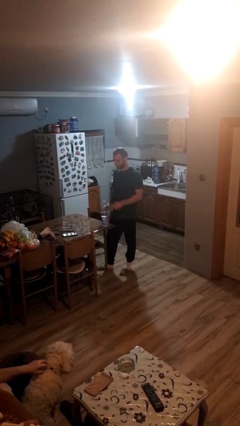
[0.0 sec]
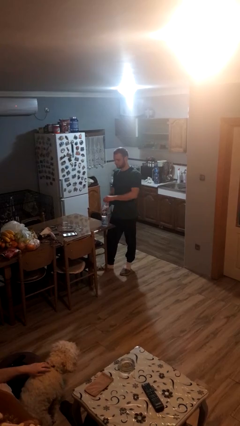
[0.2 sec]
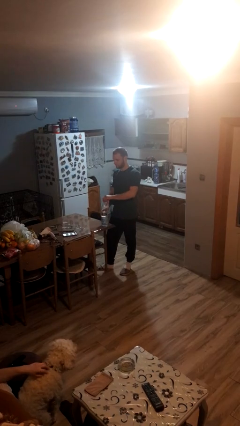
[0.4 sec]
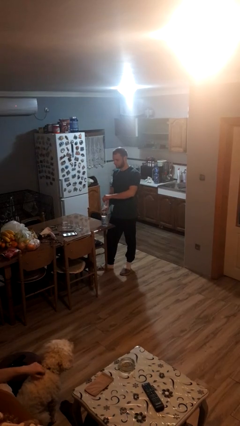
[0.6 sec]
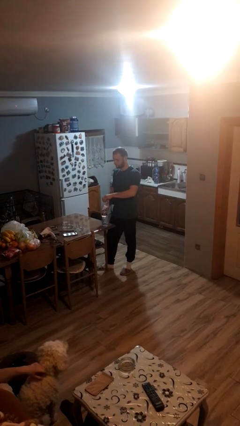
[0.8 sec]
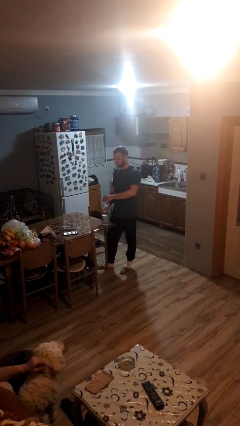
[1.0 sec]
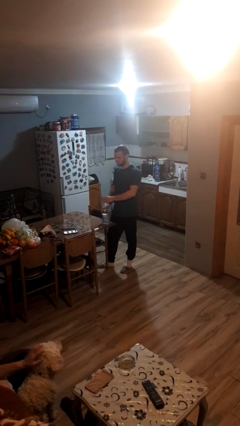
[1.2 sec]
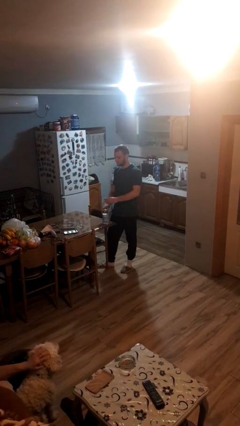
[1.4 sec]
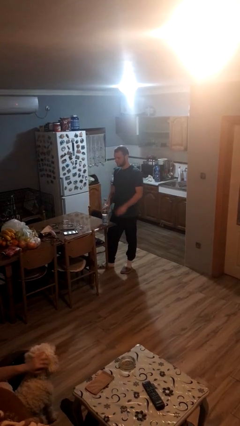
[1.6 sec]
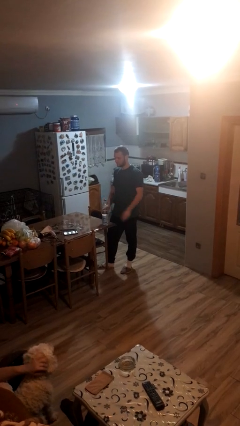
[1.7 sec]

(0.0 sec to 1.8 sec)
person screws lid to bottle

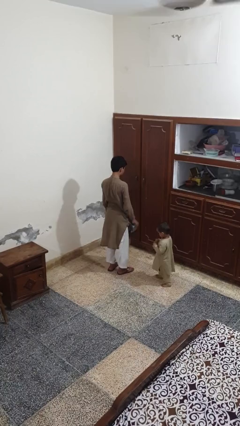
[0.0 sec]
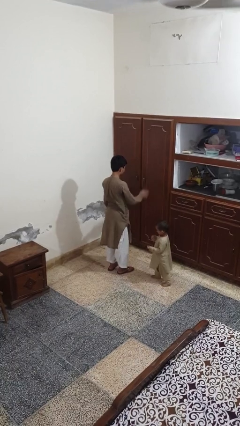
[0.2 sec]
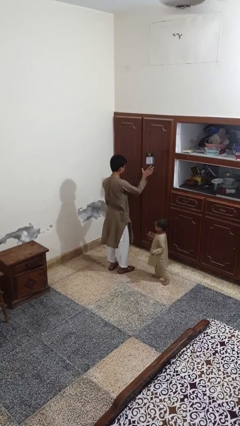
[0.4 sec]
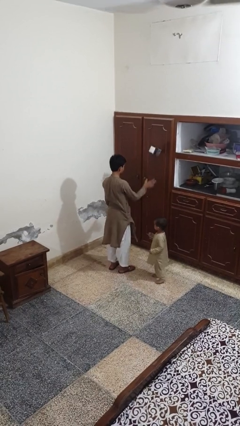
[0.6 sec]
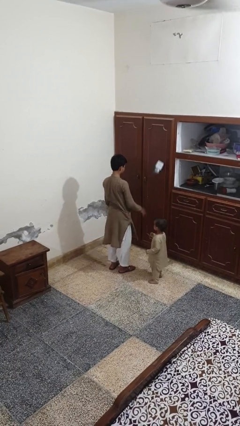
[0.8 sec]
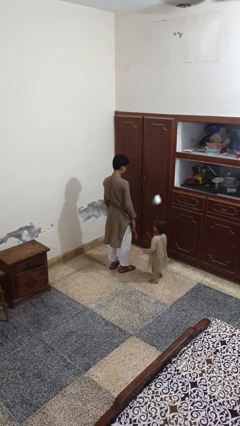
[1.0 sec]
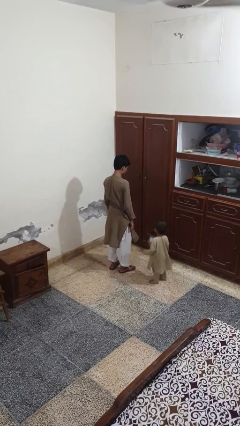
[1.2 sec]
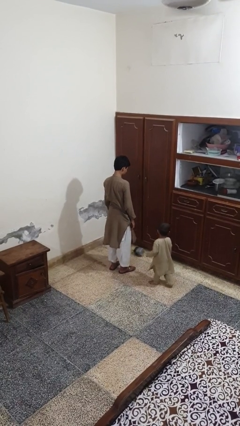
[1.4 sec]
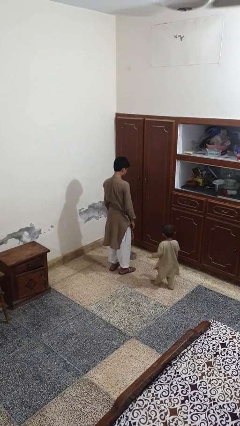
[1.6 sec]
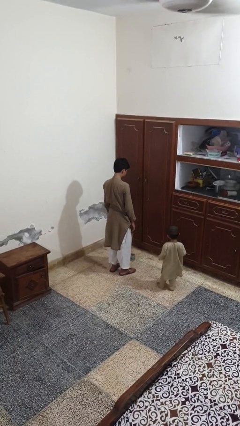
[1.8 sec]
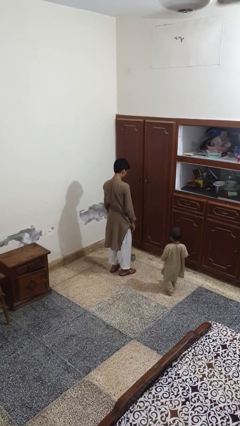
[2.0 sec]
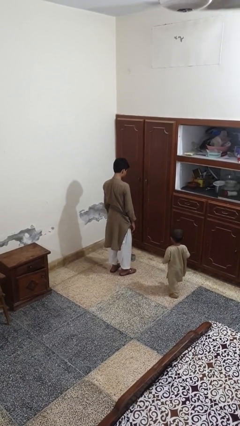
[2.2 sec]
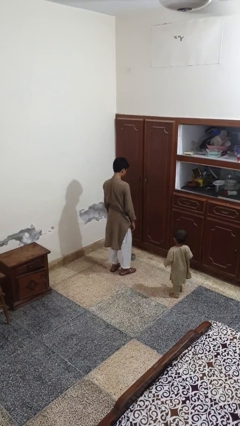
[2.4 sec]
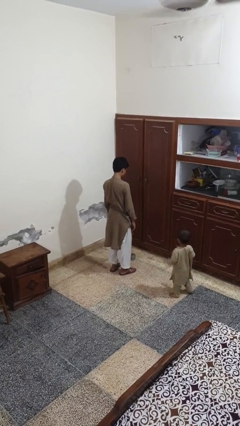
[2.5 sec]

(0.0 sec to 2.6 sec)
person throws object into air

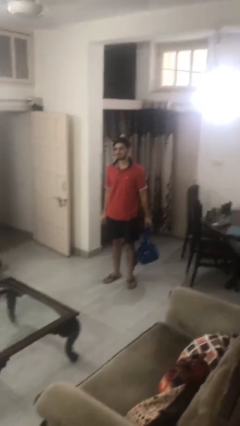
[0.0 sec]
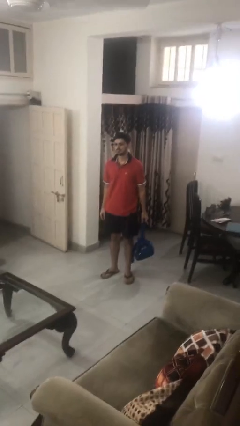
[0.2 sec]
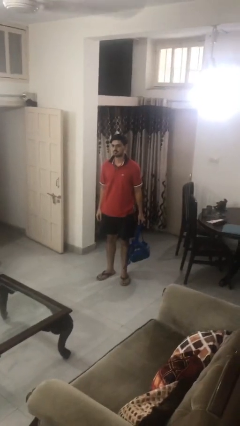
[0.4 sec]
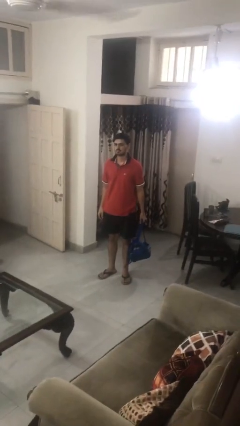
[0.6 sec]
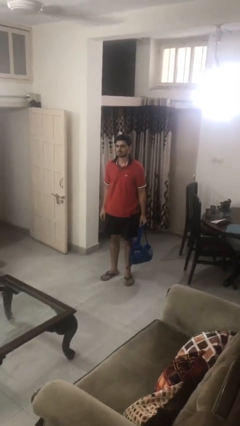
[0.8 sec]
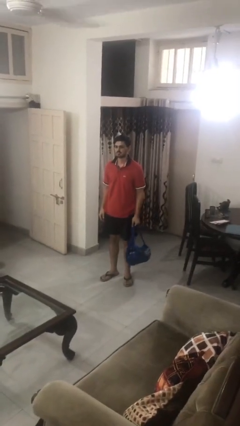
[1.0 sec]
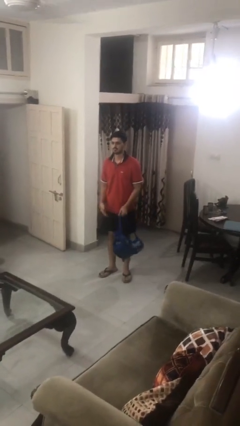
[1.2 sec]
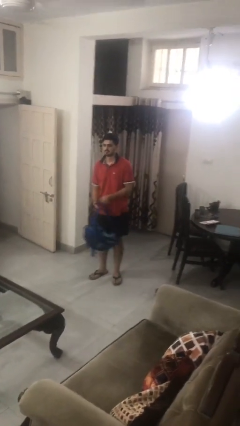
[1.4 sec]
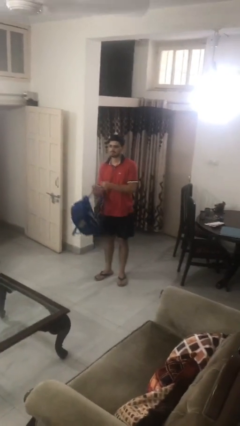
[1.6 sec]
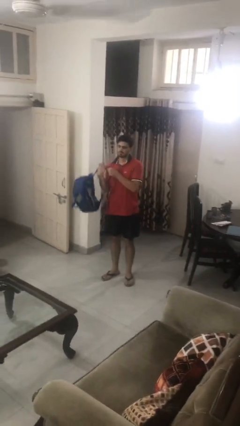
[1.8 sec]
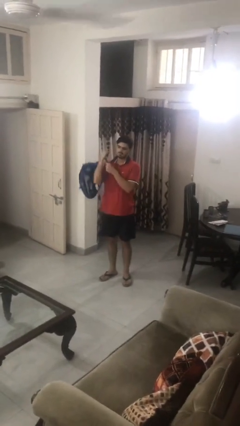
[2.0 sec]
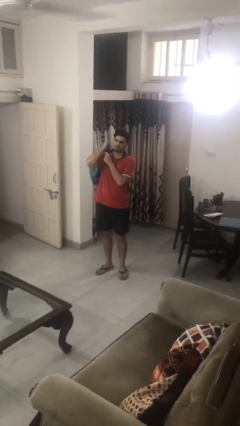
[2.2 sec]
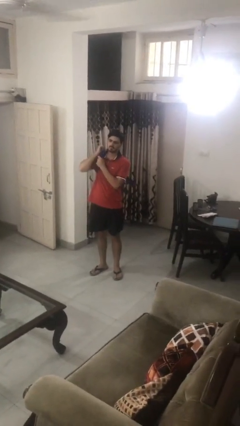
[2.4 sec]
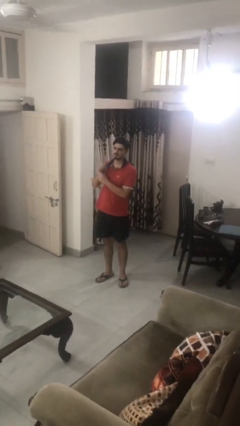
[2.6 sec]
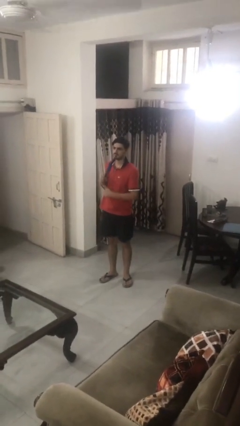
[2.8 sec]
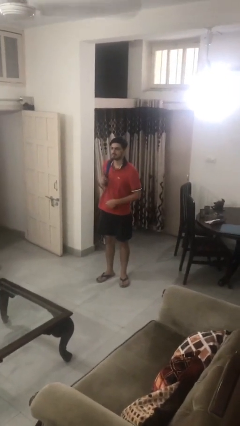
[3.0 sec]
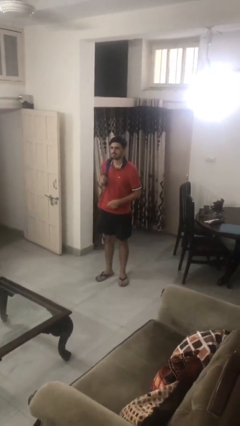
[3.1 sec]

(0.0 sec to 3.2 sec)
person puts on backpack

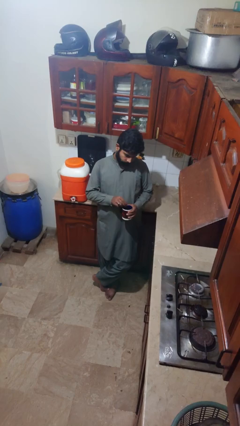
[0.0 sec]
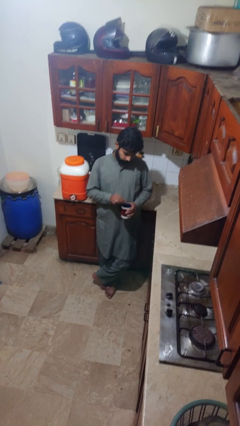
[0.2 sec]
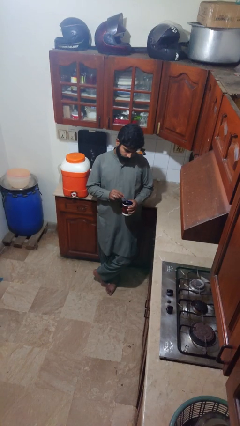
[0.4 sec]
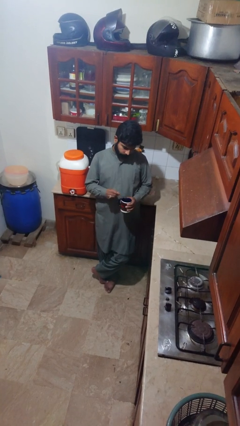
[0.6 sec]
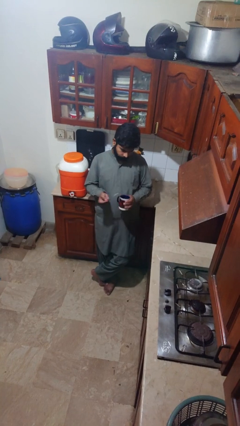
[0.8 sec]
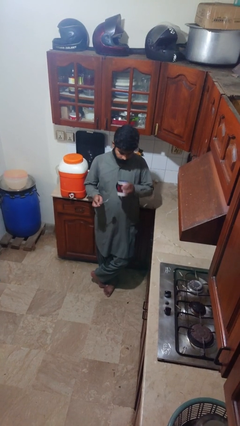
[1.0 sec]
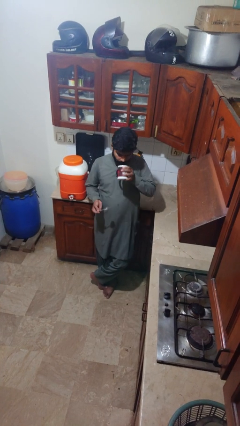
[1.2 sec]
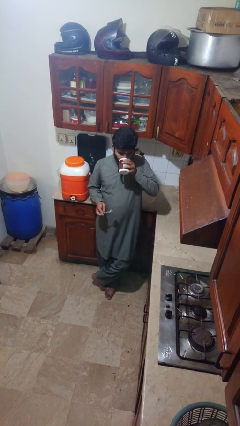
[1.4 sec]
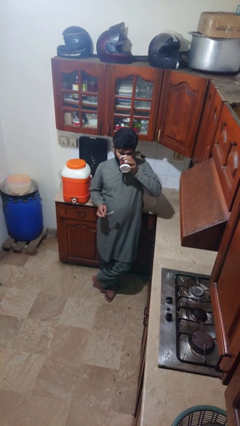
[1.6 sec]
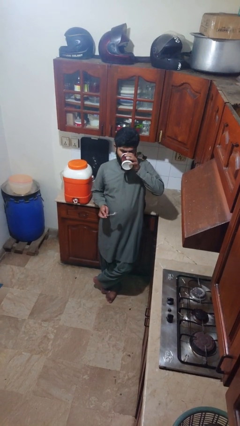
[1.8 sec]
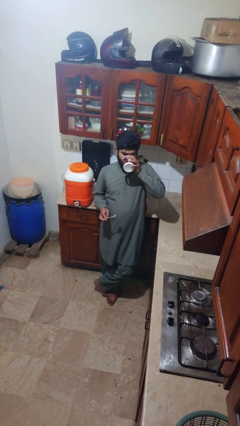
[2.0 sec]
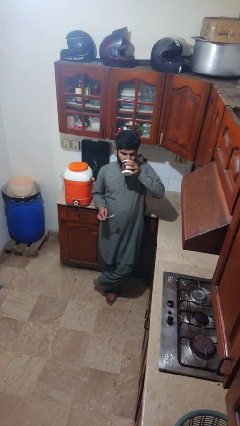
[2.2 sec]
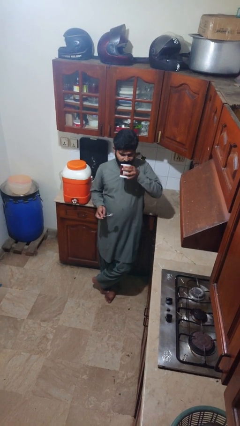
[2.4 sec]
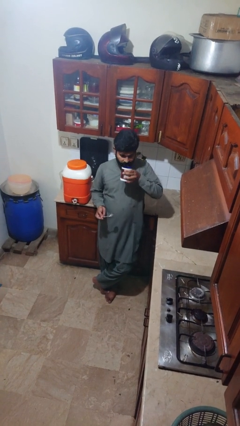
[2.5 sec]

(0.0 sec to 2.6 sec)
person drinks from mug

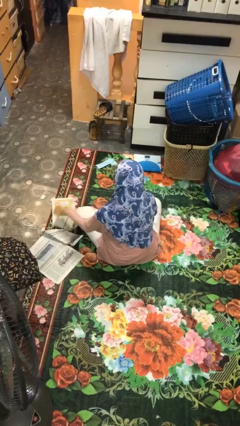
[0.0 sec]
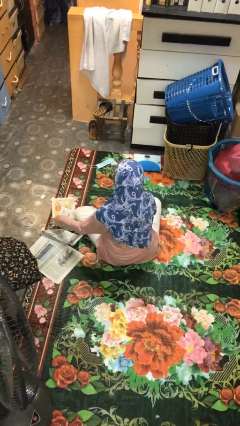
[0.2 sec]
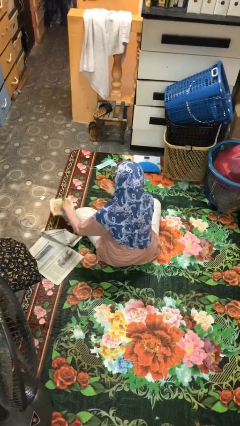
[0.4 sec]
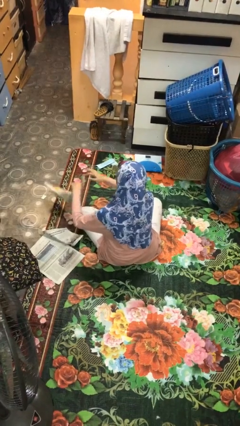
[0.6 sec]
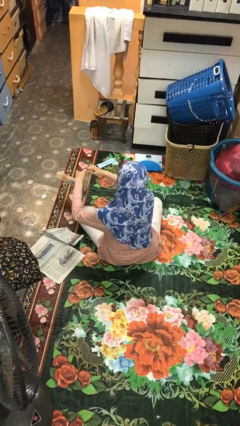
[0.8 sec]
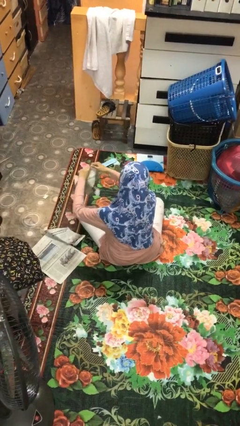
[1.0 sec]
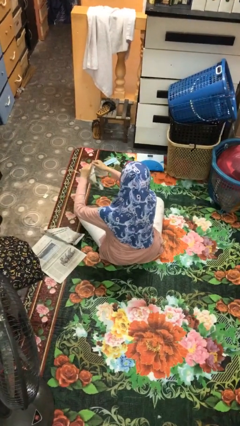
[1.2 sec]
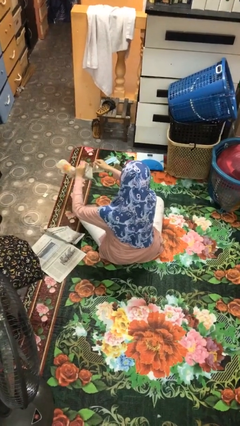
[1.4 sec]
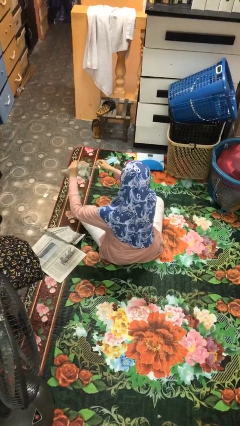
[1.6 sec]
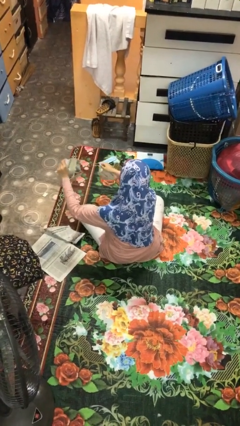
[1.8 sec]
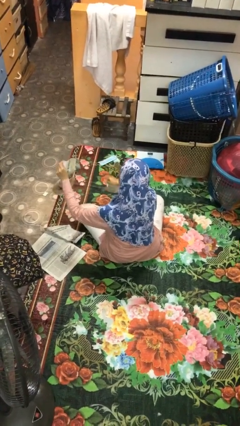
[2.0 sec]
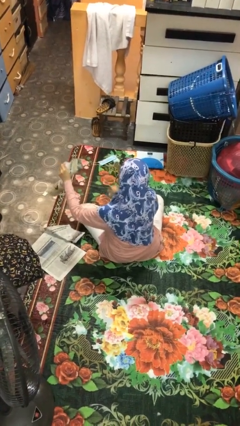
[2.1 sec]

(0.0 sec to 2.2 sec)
person tears paper

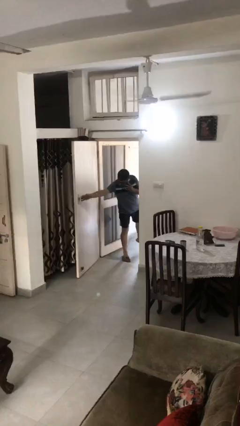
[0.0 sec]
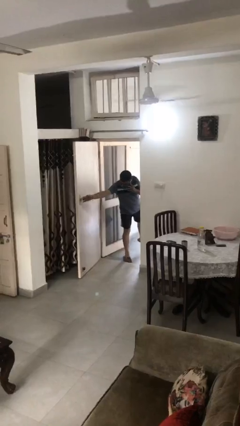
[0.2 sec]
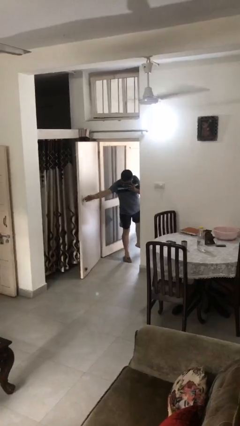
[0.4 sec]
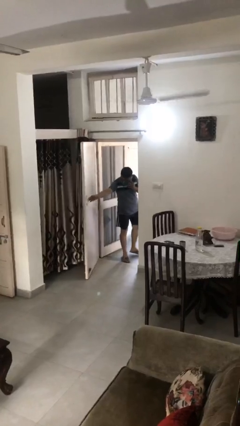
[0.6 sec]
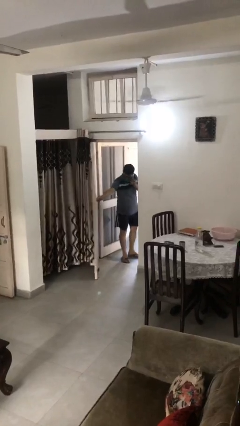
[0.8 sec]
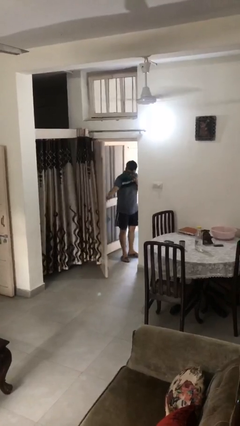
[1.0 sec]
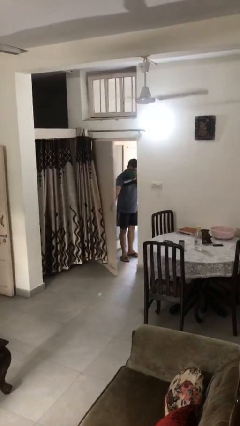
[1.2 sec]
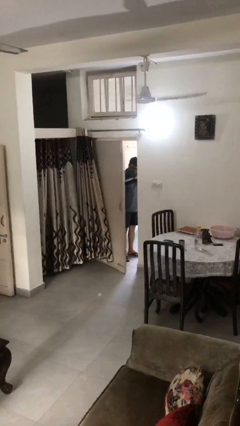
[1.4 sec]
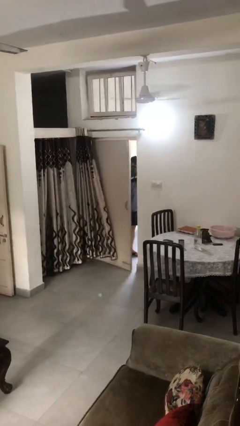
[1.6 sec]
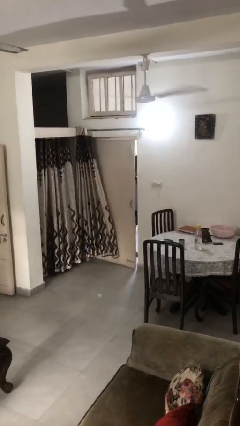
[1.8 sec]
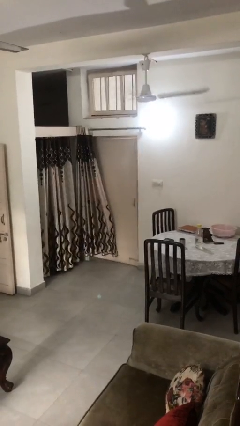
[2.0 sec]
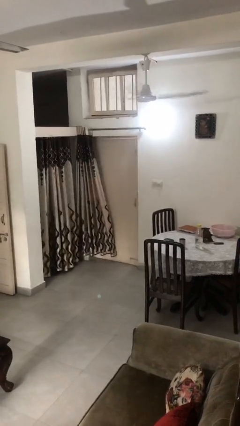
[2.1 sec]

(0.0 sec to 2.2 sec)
person closes facility door

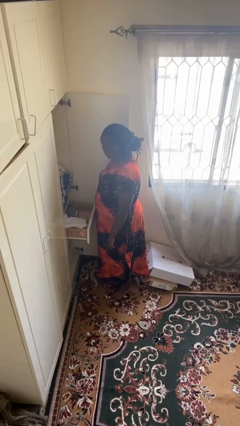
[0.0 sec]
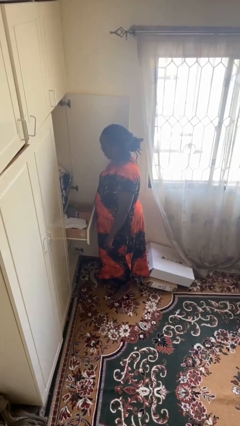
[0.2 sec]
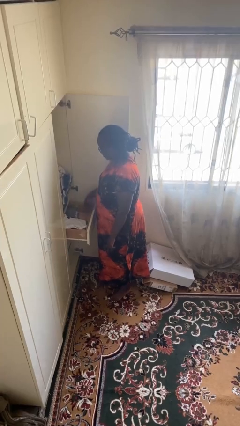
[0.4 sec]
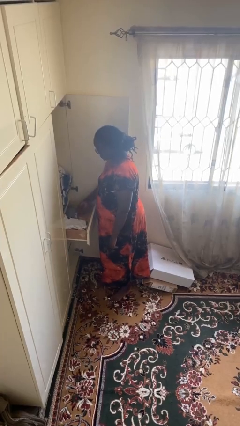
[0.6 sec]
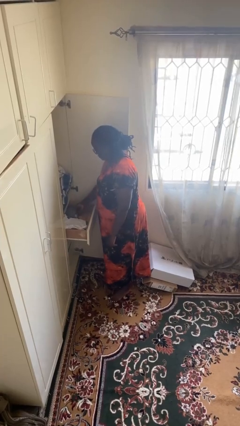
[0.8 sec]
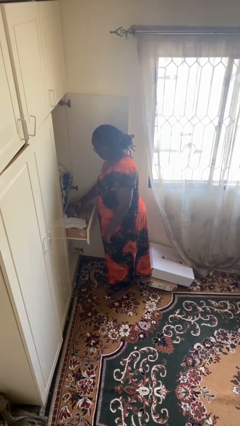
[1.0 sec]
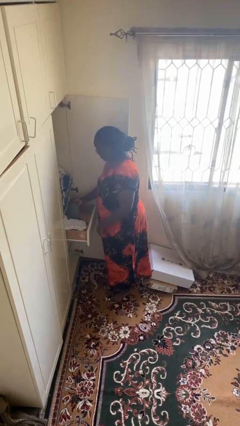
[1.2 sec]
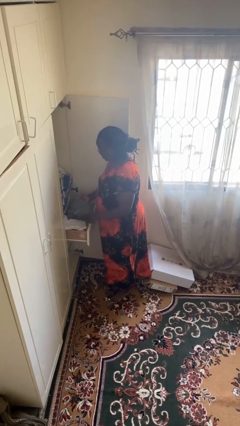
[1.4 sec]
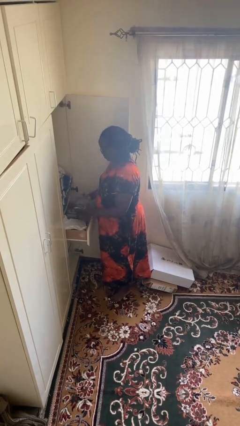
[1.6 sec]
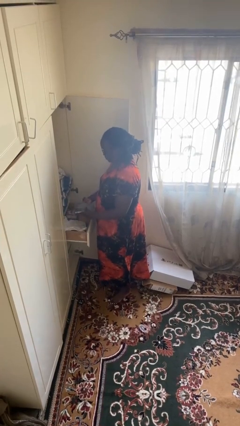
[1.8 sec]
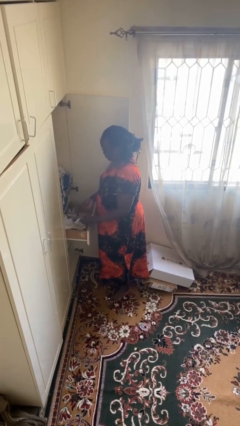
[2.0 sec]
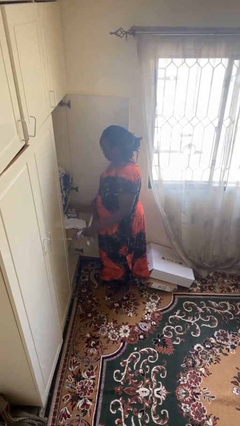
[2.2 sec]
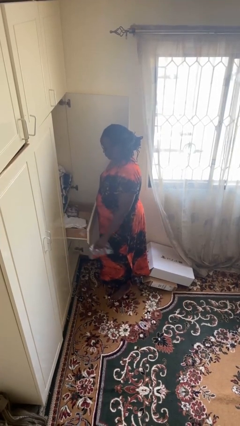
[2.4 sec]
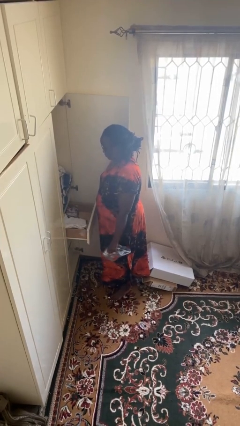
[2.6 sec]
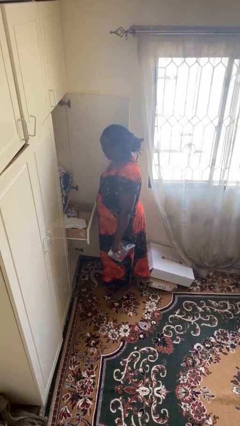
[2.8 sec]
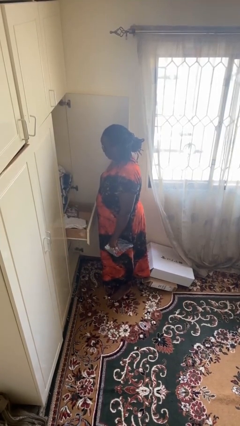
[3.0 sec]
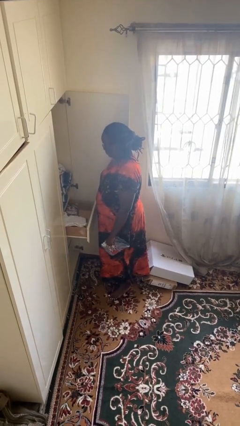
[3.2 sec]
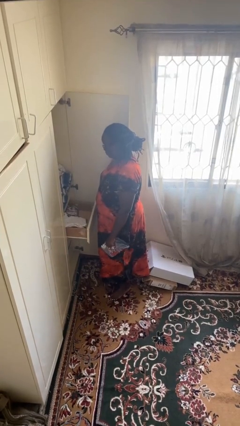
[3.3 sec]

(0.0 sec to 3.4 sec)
person takes clothes from dresser
